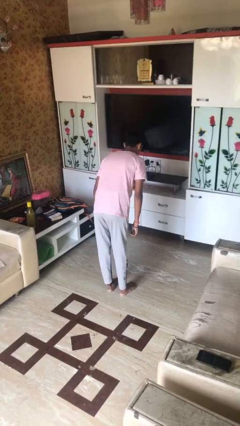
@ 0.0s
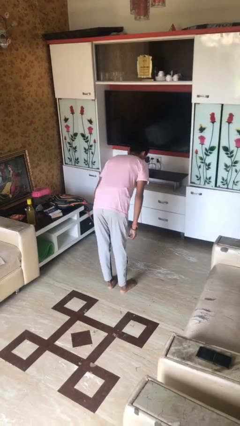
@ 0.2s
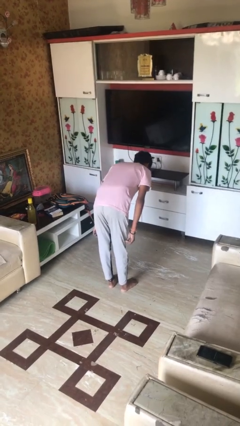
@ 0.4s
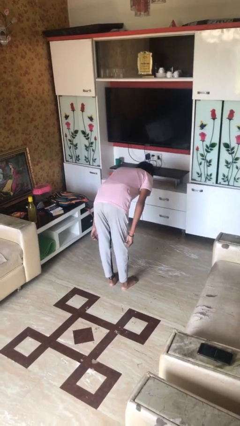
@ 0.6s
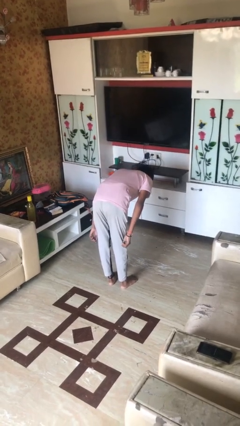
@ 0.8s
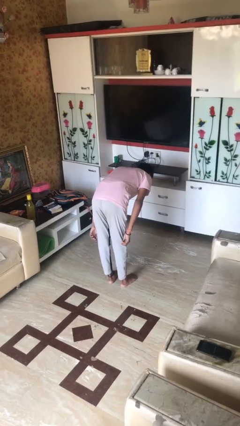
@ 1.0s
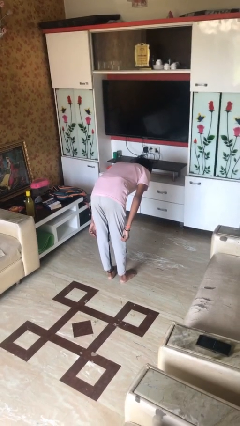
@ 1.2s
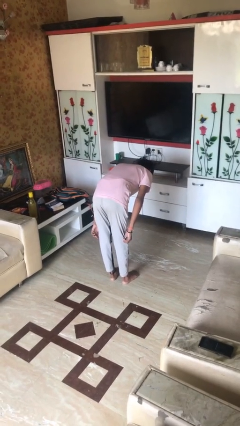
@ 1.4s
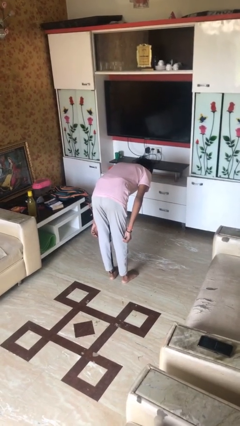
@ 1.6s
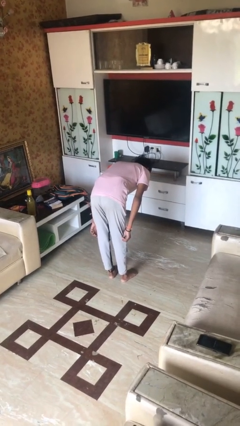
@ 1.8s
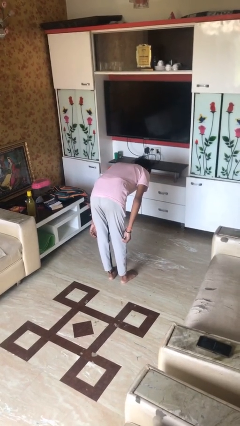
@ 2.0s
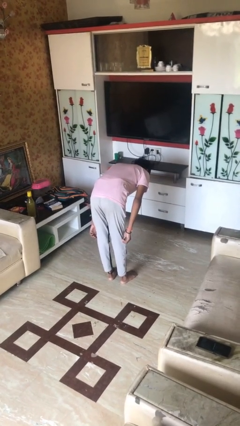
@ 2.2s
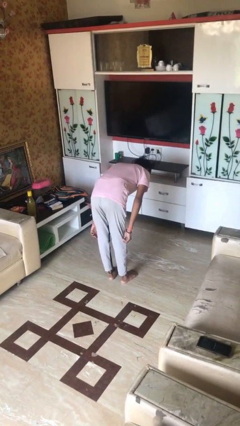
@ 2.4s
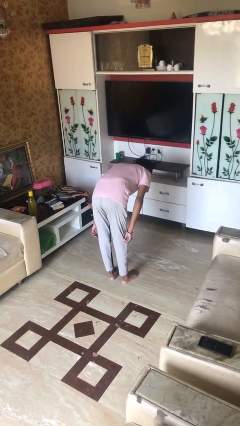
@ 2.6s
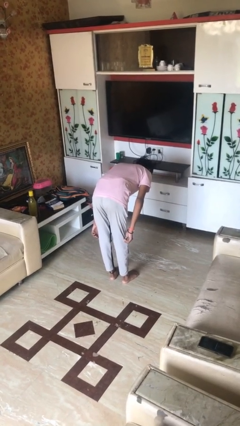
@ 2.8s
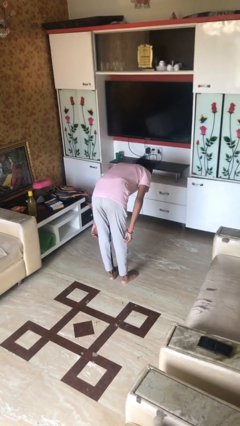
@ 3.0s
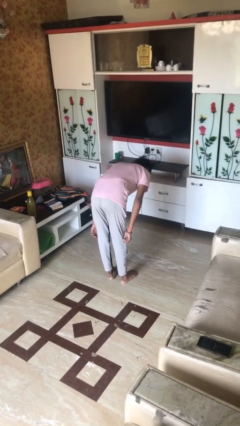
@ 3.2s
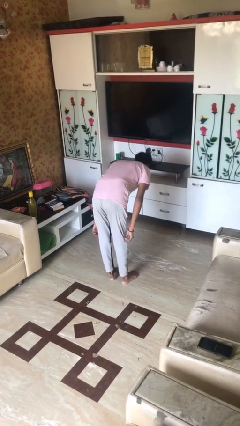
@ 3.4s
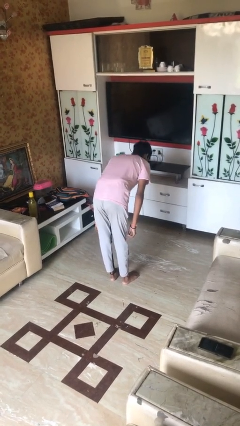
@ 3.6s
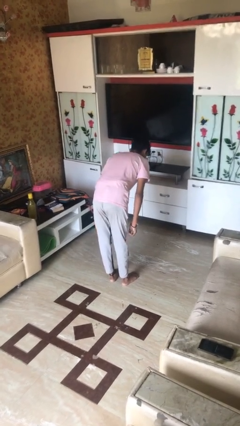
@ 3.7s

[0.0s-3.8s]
person bows

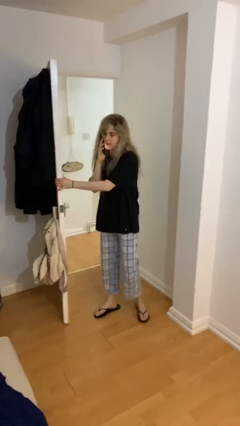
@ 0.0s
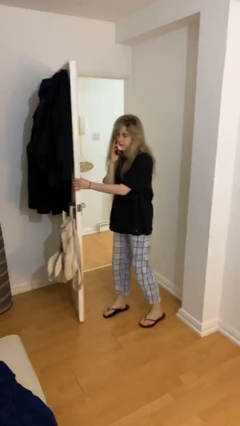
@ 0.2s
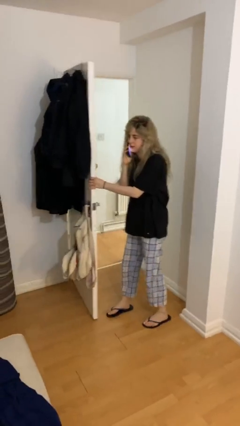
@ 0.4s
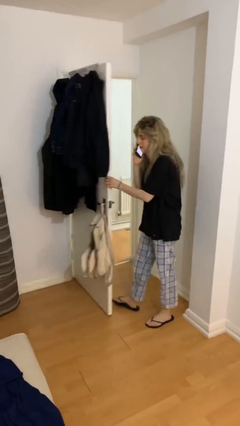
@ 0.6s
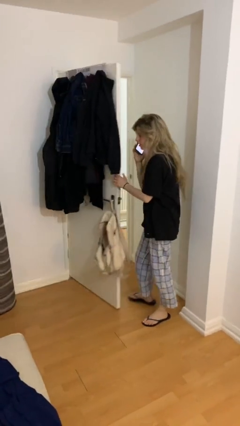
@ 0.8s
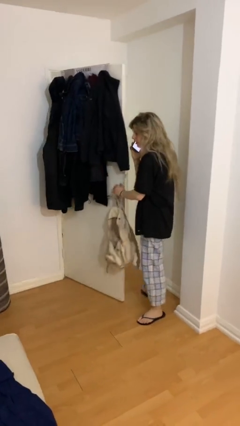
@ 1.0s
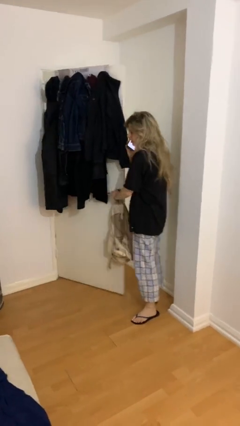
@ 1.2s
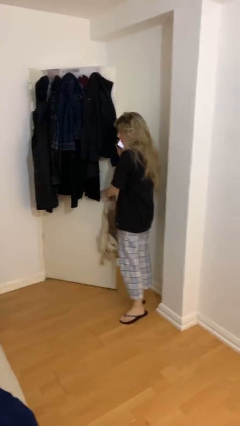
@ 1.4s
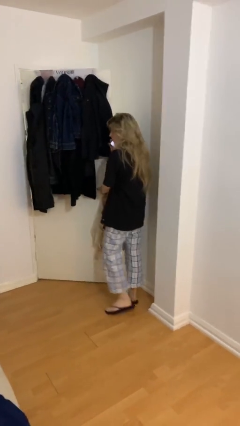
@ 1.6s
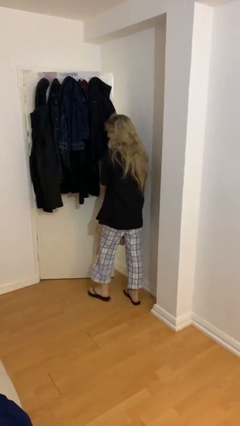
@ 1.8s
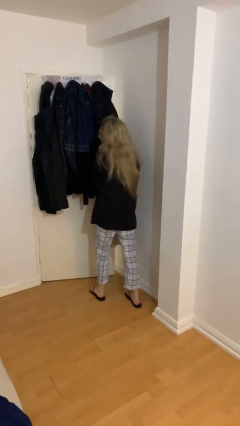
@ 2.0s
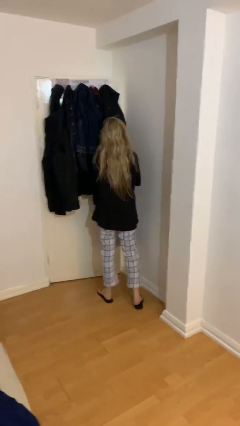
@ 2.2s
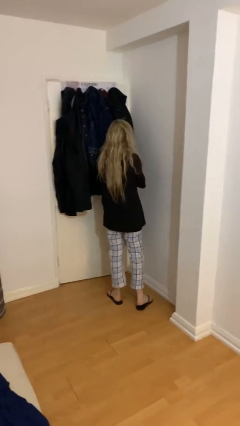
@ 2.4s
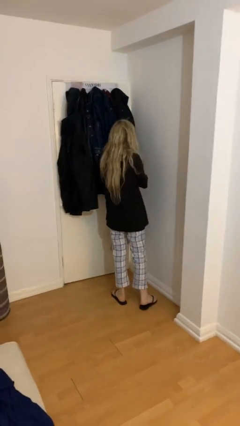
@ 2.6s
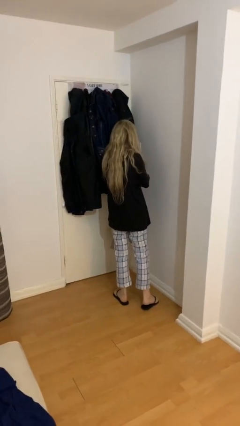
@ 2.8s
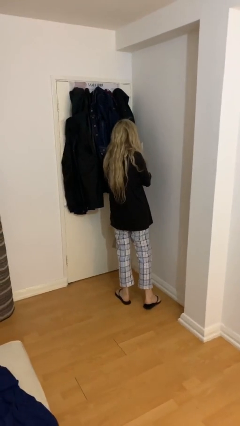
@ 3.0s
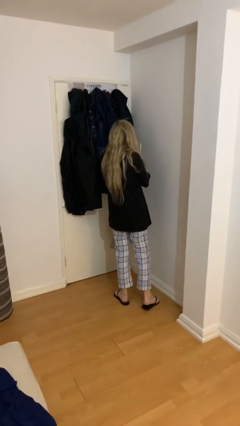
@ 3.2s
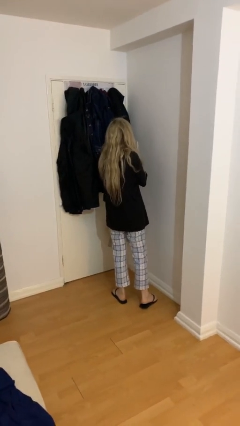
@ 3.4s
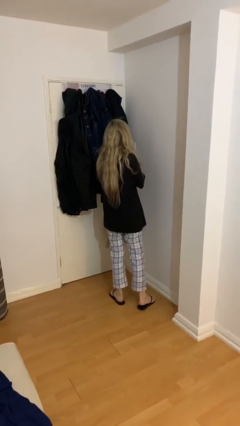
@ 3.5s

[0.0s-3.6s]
person closes facility door

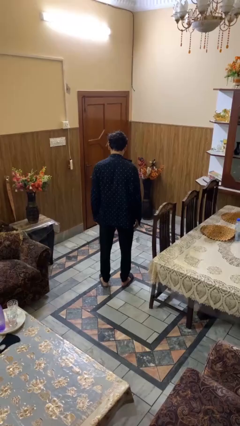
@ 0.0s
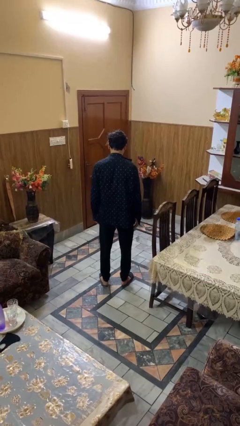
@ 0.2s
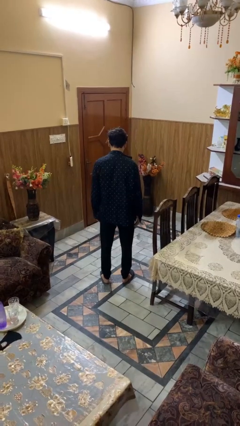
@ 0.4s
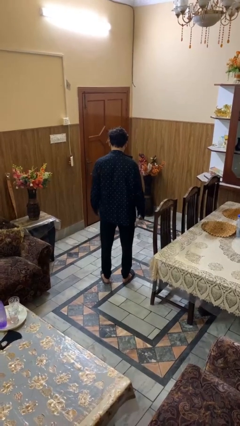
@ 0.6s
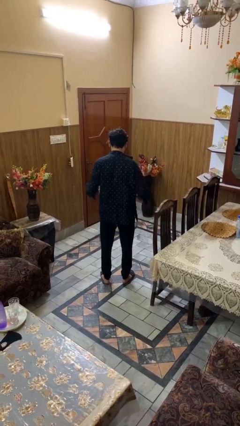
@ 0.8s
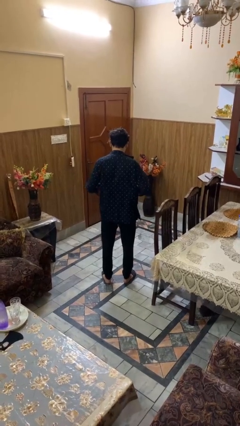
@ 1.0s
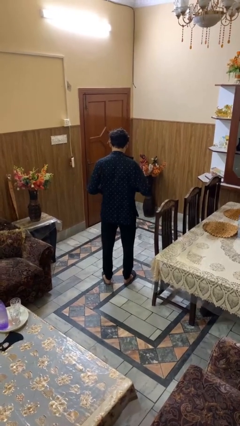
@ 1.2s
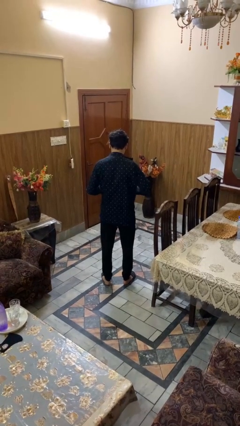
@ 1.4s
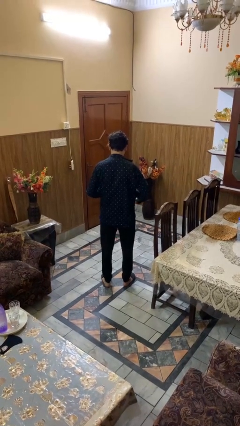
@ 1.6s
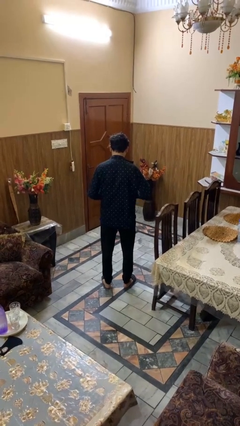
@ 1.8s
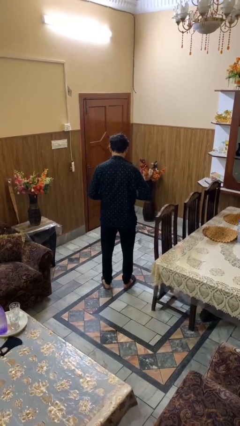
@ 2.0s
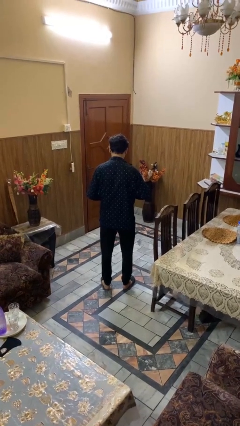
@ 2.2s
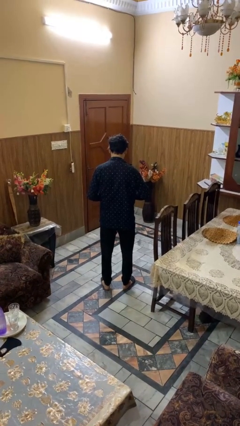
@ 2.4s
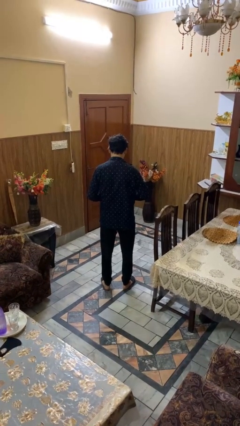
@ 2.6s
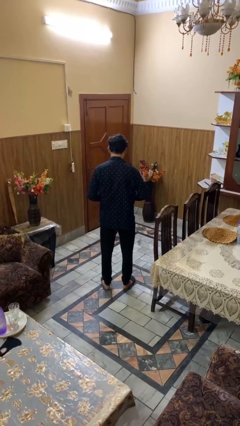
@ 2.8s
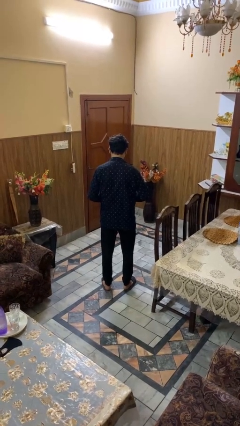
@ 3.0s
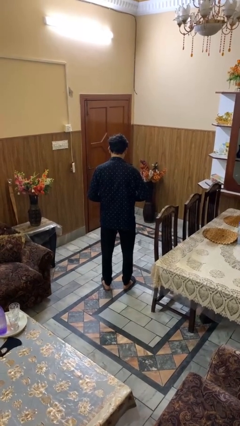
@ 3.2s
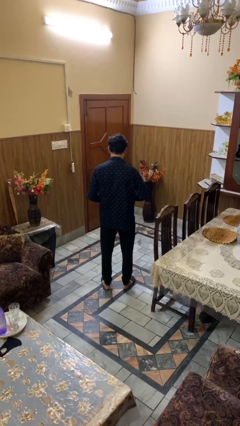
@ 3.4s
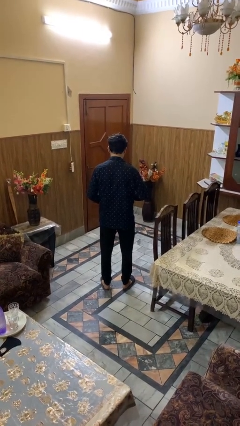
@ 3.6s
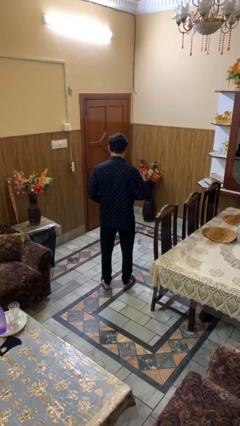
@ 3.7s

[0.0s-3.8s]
person buttons shirt

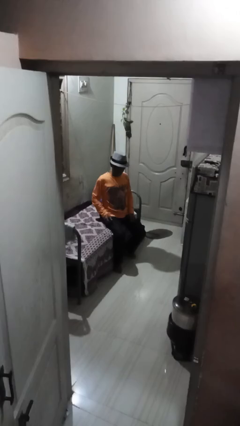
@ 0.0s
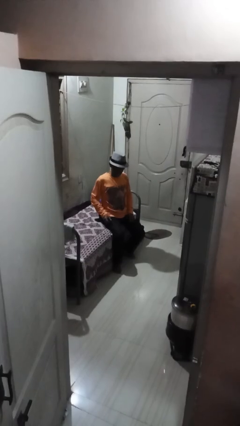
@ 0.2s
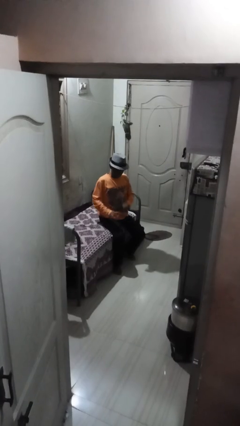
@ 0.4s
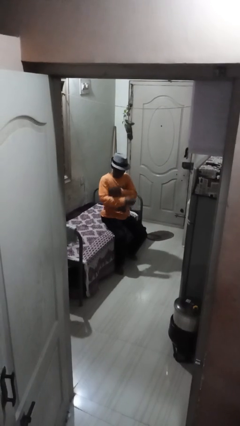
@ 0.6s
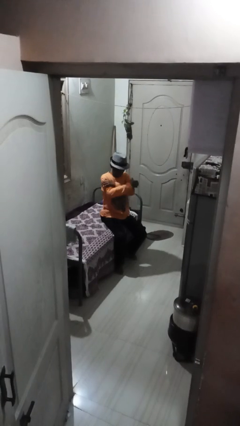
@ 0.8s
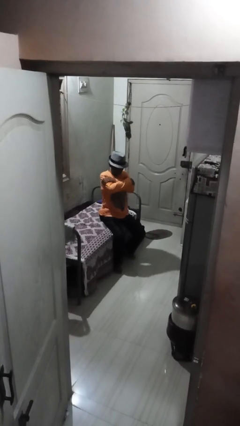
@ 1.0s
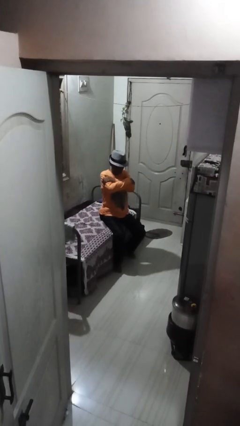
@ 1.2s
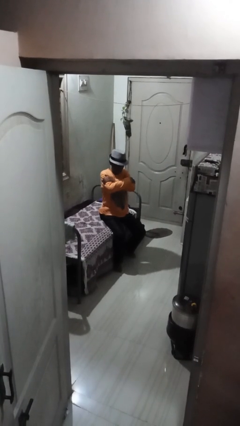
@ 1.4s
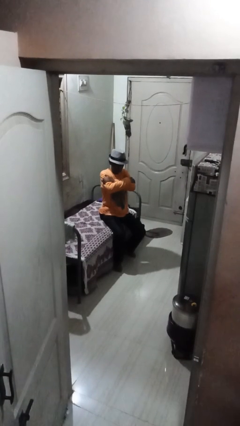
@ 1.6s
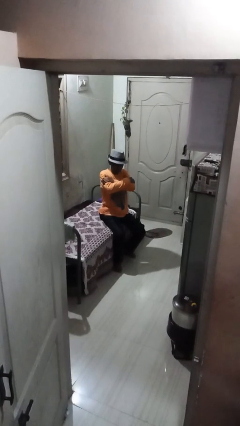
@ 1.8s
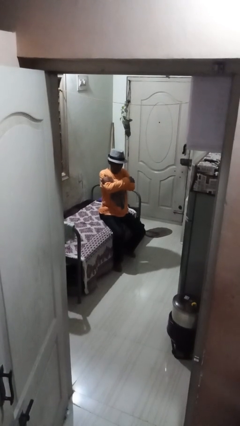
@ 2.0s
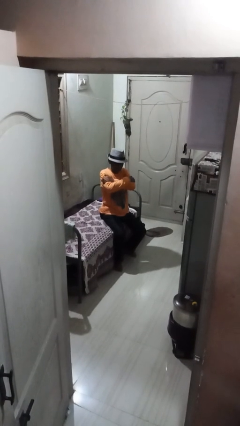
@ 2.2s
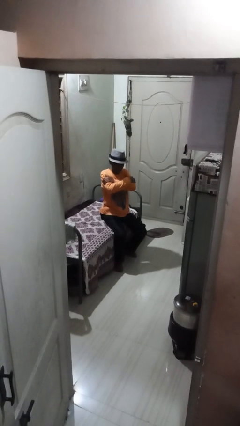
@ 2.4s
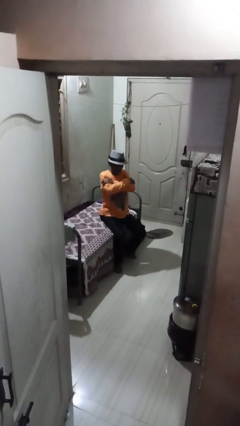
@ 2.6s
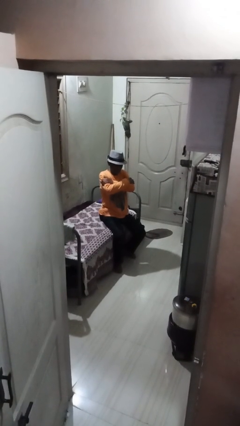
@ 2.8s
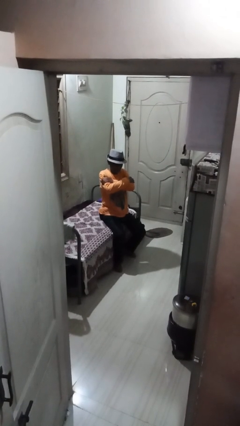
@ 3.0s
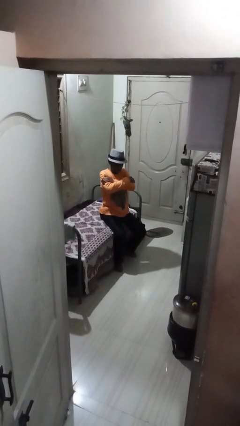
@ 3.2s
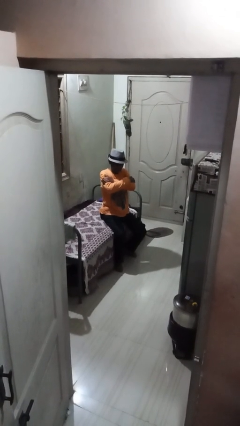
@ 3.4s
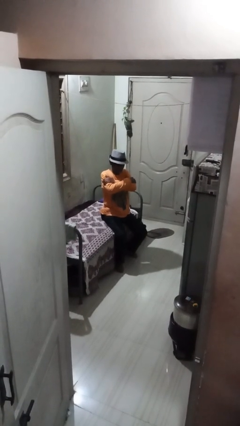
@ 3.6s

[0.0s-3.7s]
person crosses arms

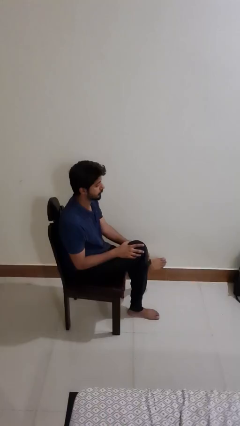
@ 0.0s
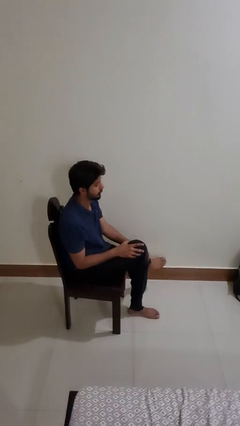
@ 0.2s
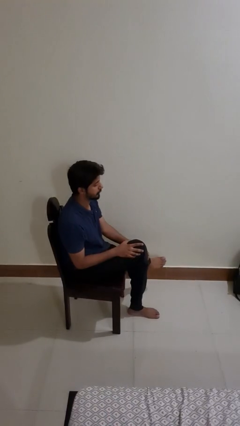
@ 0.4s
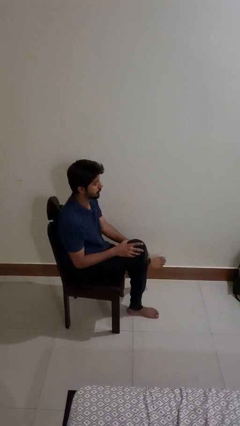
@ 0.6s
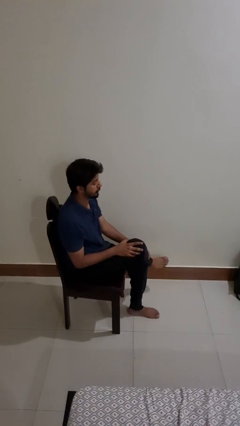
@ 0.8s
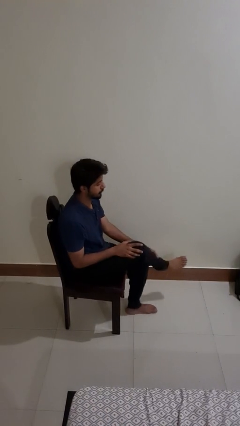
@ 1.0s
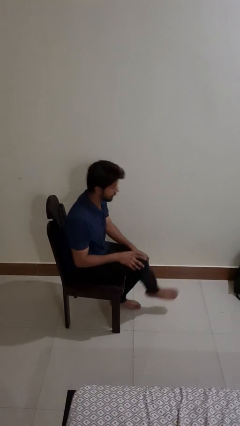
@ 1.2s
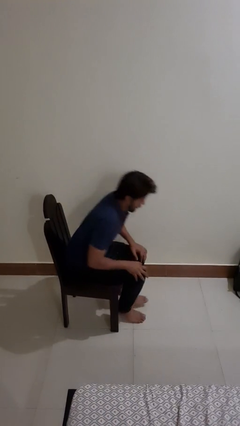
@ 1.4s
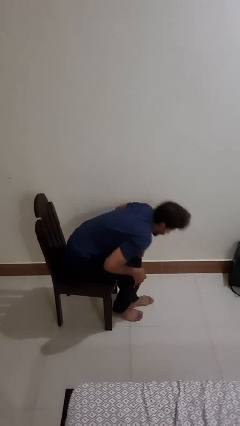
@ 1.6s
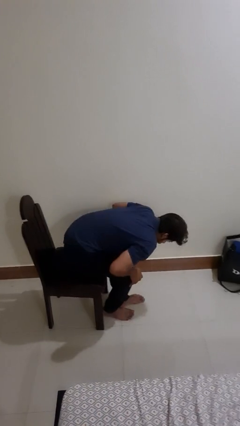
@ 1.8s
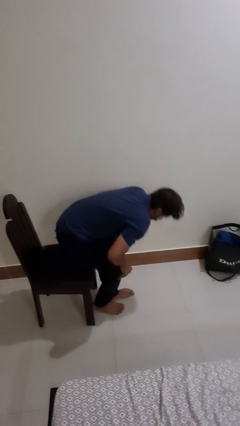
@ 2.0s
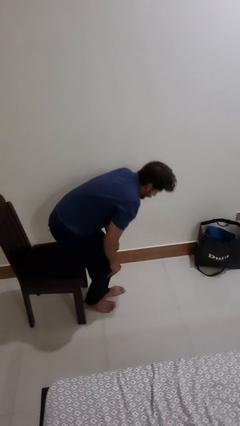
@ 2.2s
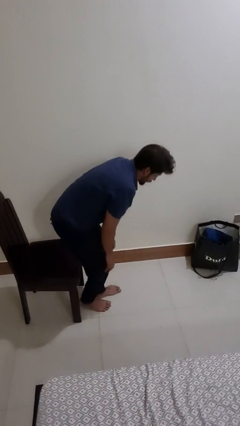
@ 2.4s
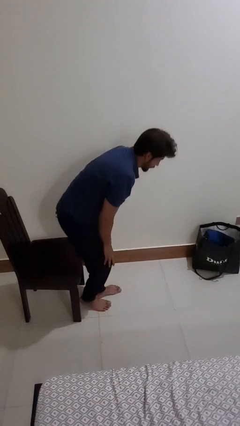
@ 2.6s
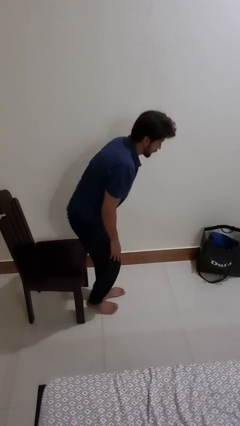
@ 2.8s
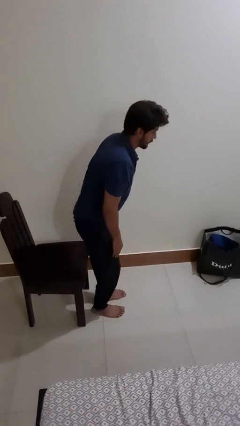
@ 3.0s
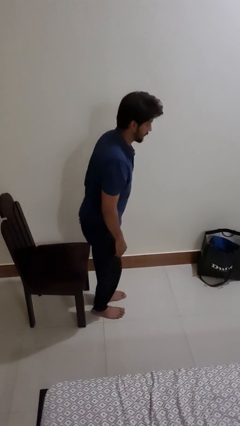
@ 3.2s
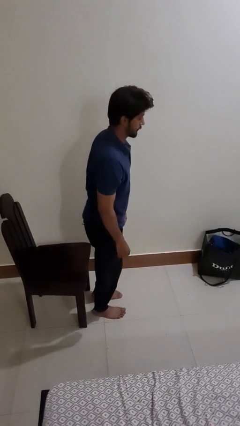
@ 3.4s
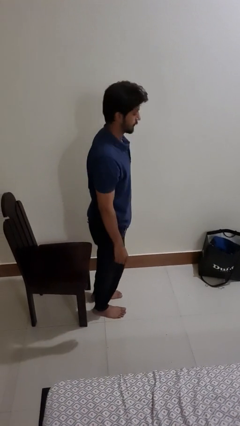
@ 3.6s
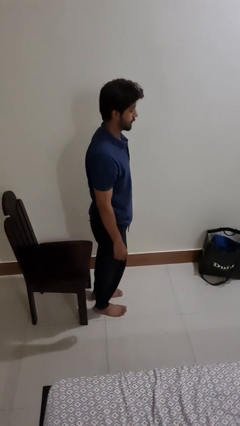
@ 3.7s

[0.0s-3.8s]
person falls from chair
